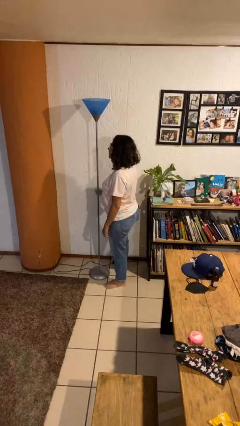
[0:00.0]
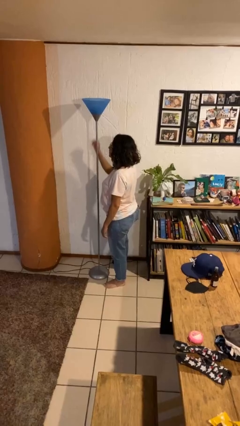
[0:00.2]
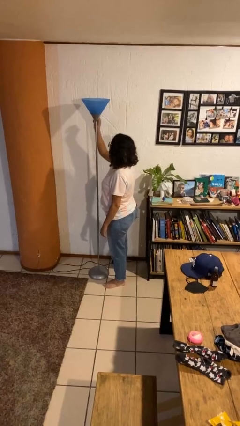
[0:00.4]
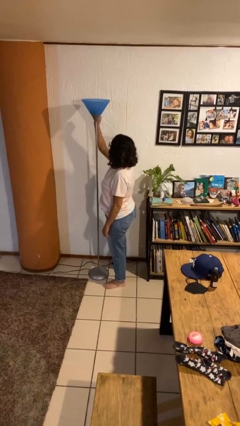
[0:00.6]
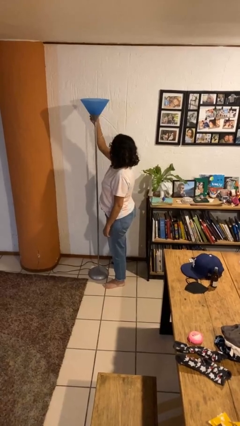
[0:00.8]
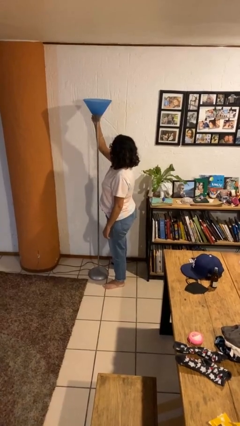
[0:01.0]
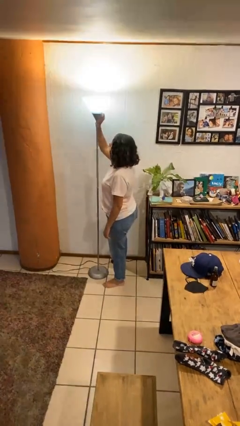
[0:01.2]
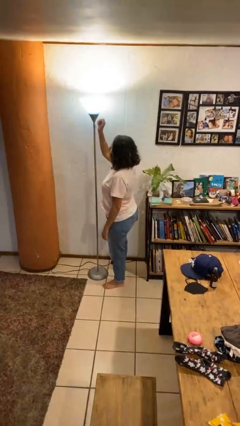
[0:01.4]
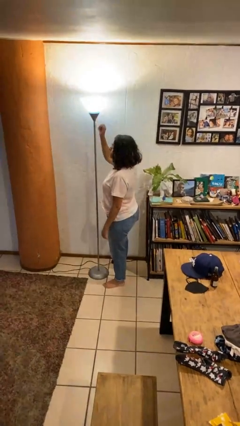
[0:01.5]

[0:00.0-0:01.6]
person turns on lamp

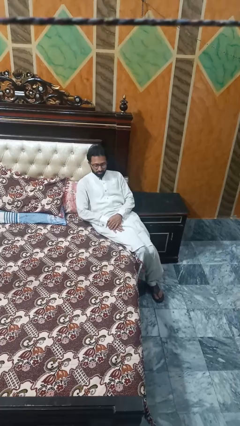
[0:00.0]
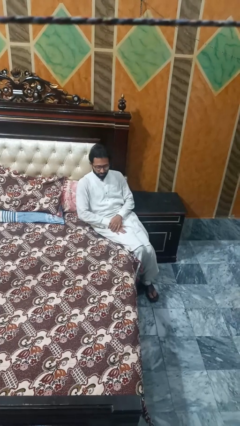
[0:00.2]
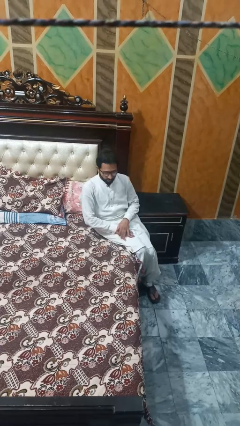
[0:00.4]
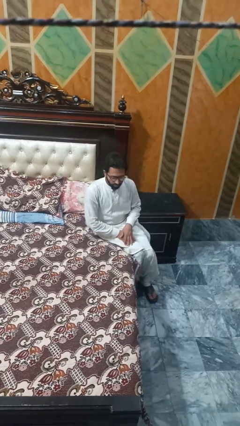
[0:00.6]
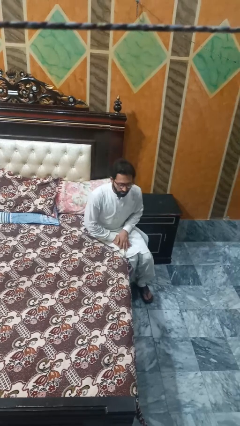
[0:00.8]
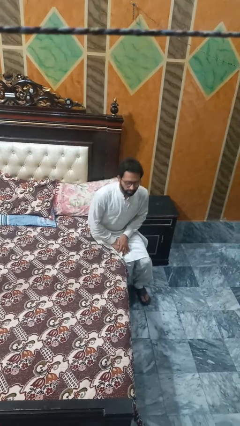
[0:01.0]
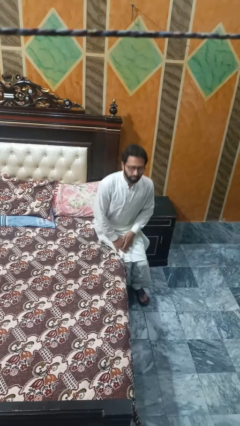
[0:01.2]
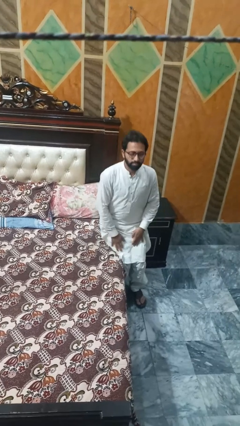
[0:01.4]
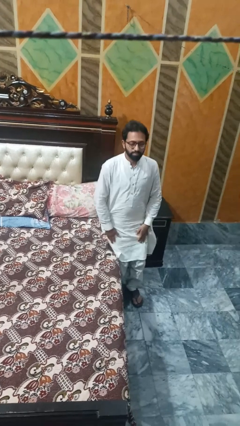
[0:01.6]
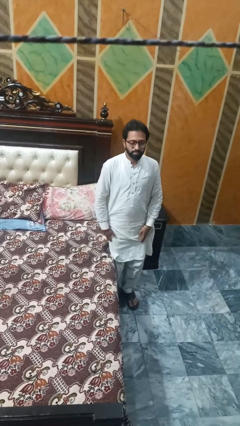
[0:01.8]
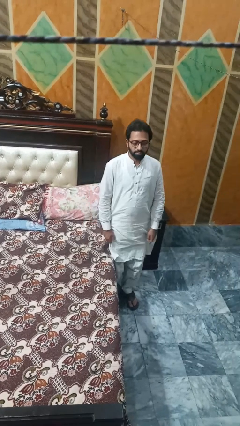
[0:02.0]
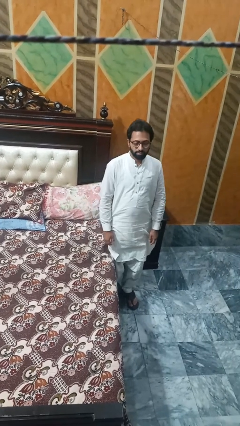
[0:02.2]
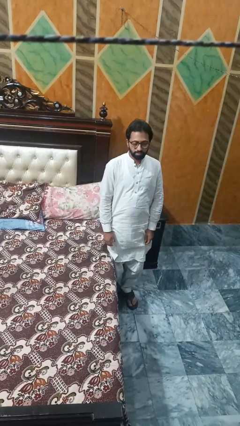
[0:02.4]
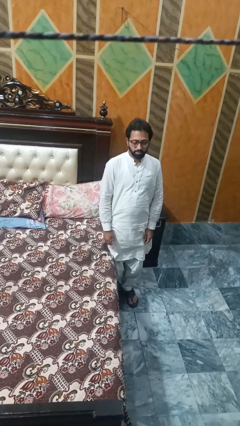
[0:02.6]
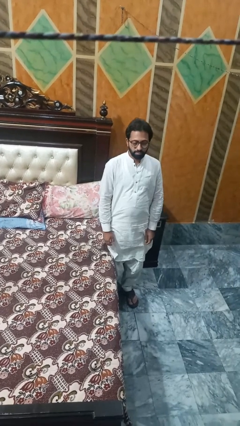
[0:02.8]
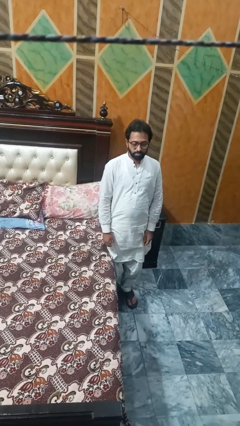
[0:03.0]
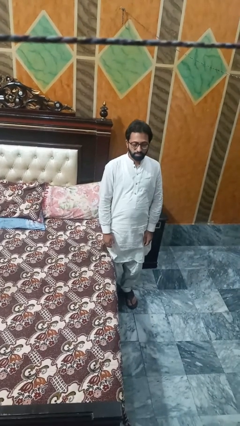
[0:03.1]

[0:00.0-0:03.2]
person stands up

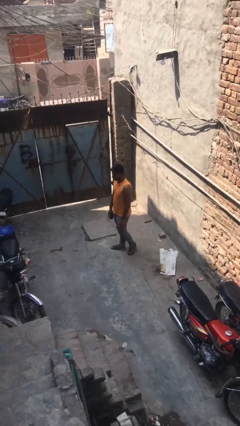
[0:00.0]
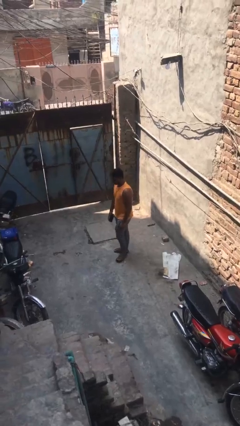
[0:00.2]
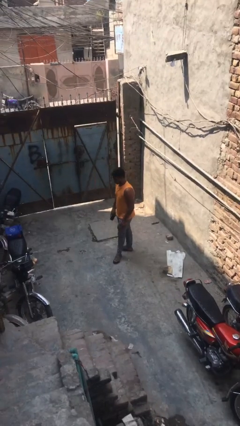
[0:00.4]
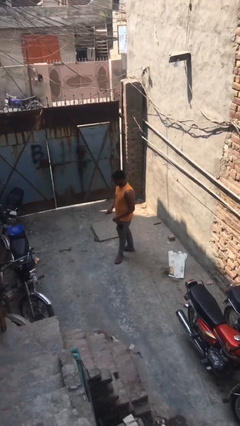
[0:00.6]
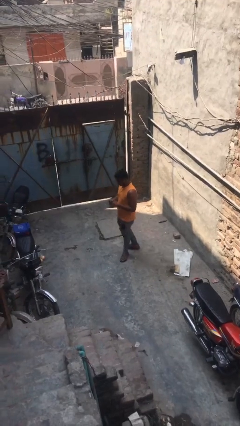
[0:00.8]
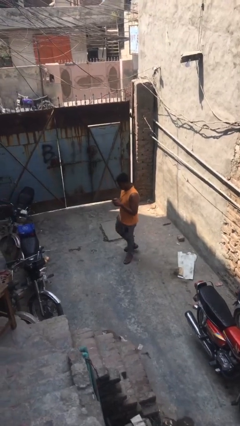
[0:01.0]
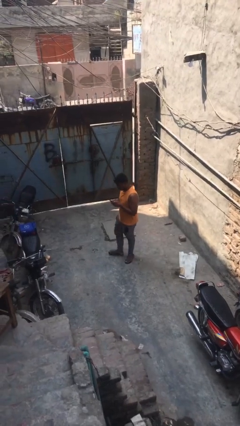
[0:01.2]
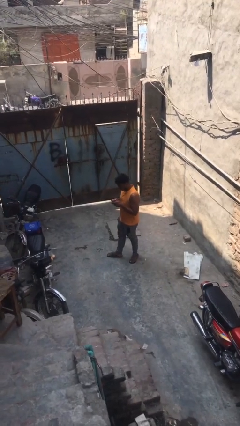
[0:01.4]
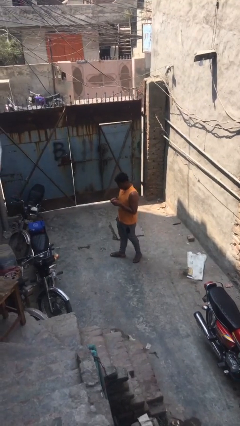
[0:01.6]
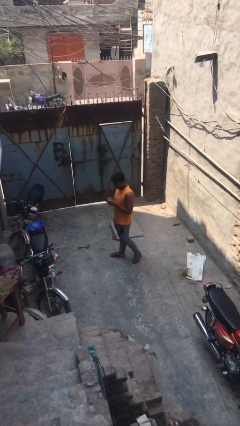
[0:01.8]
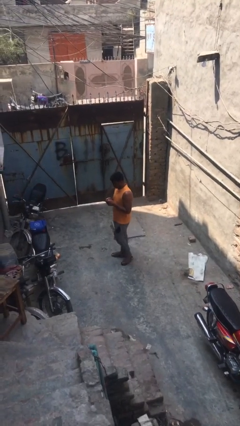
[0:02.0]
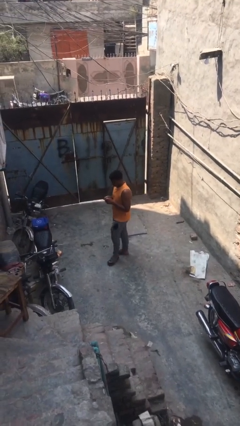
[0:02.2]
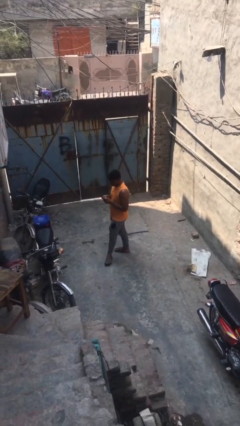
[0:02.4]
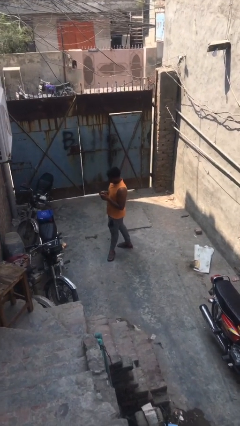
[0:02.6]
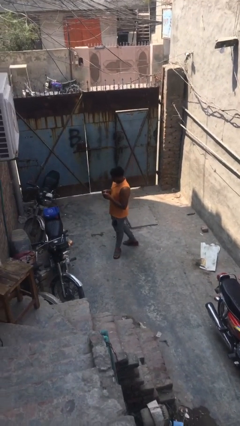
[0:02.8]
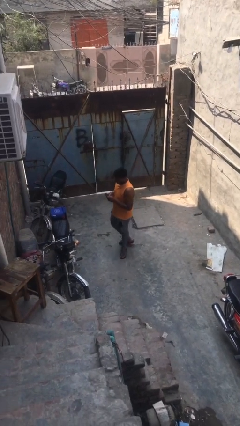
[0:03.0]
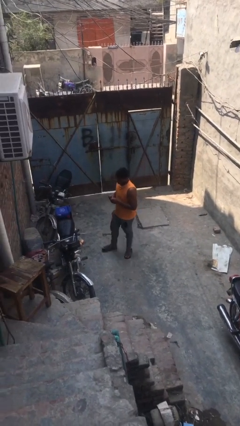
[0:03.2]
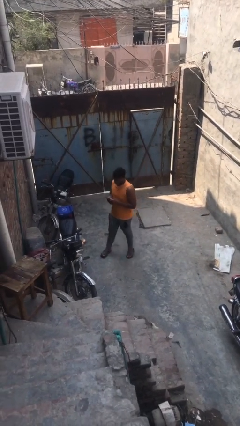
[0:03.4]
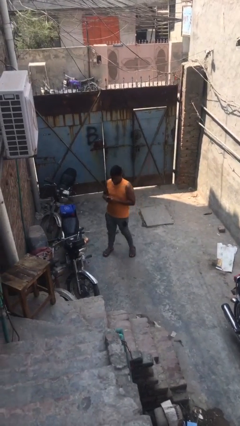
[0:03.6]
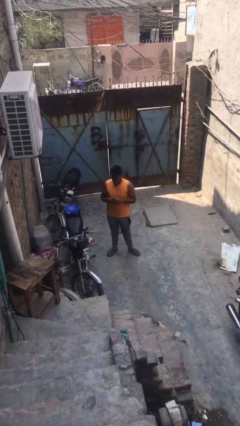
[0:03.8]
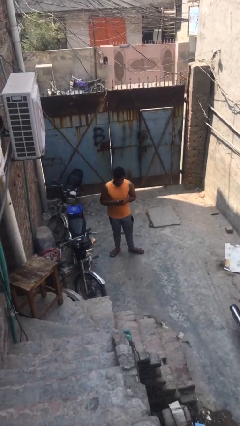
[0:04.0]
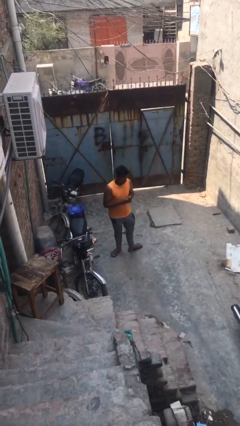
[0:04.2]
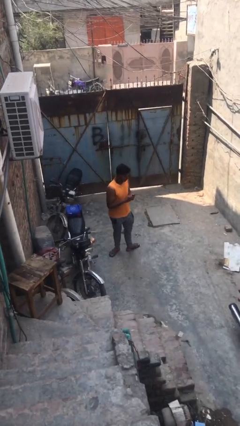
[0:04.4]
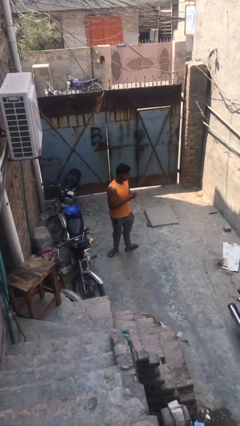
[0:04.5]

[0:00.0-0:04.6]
person texts on phone

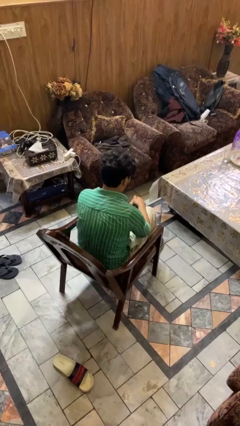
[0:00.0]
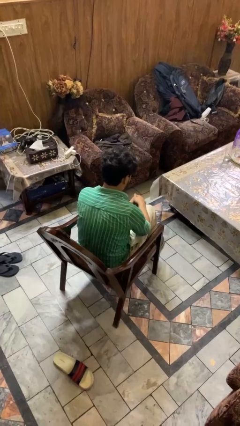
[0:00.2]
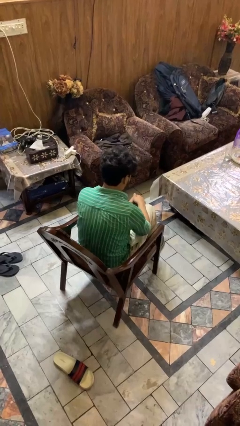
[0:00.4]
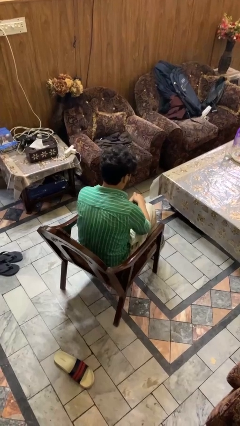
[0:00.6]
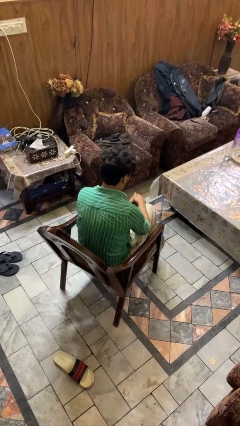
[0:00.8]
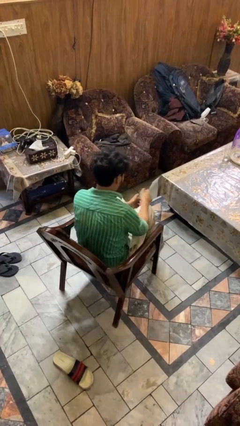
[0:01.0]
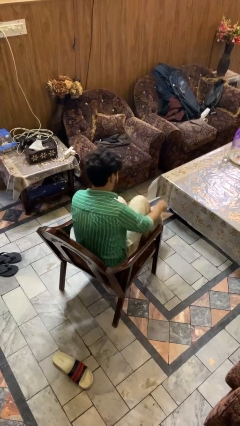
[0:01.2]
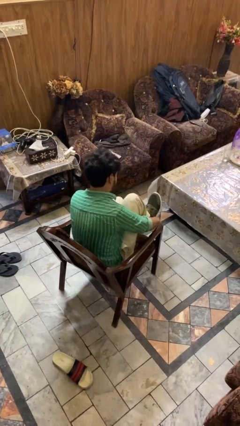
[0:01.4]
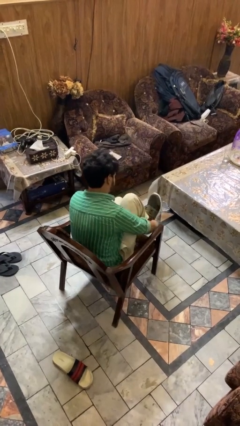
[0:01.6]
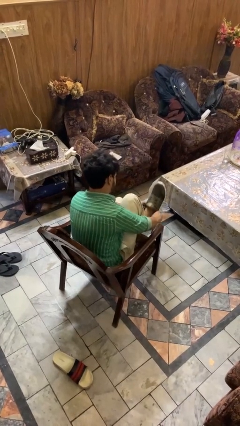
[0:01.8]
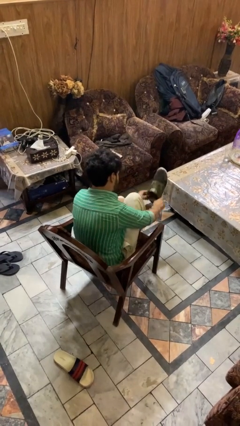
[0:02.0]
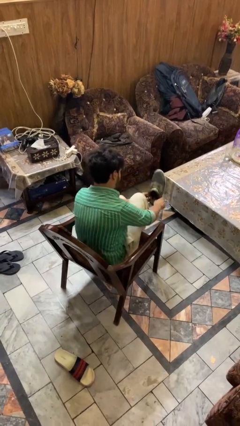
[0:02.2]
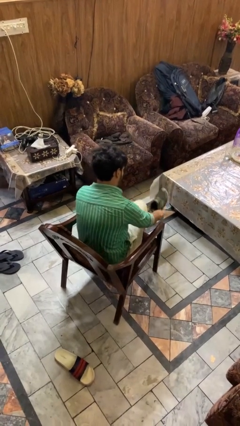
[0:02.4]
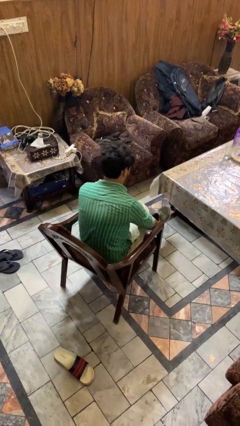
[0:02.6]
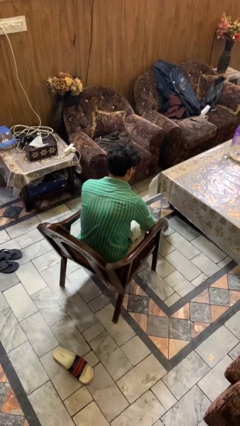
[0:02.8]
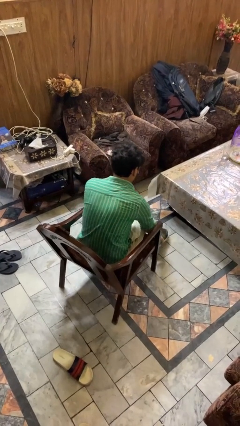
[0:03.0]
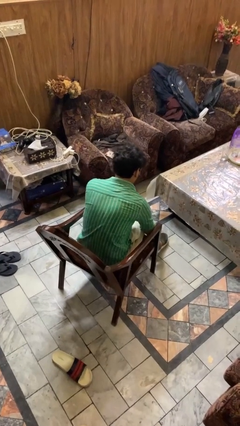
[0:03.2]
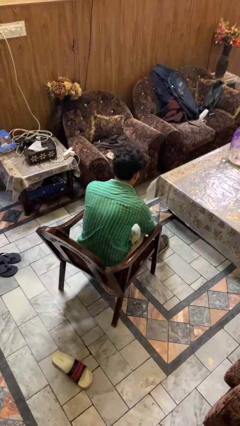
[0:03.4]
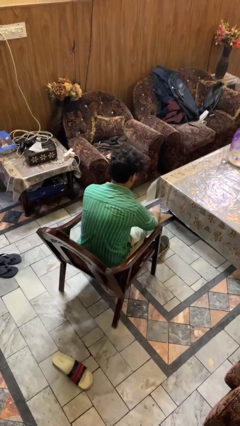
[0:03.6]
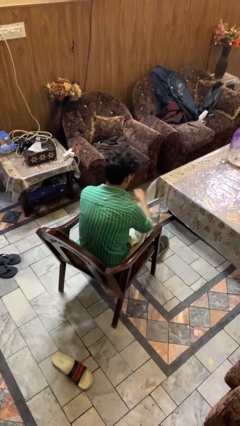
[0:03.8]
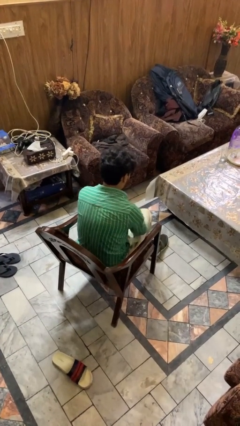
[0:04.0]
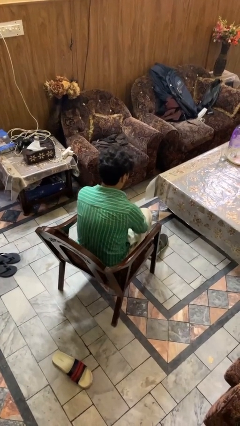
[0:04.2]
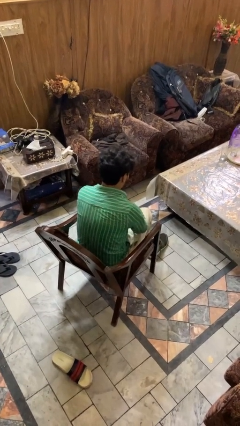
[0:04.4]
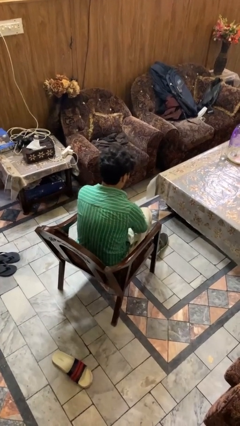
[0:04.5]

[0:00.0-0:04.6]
person takes off shoes

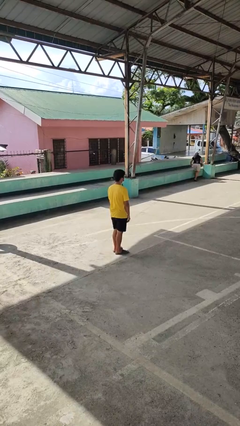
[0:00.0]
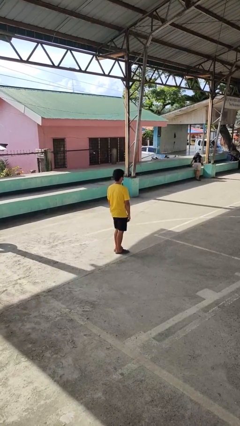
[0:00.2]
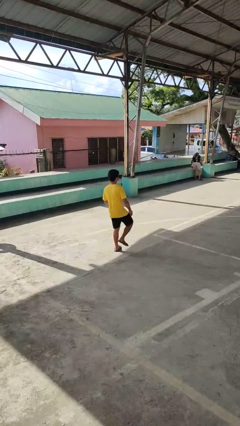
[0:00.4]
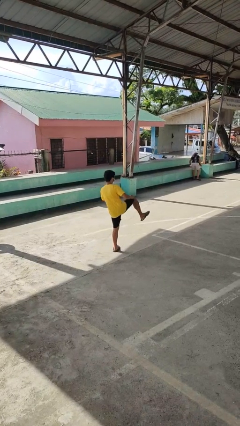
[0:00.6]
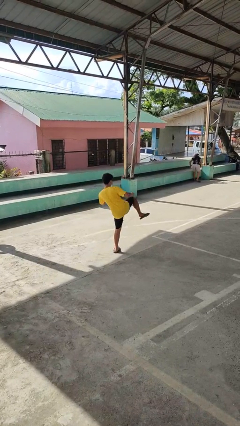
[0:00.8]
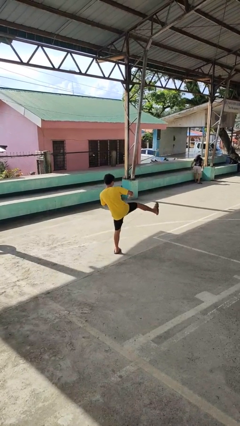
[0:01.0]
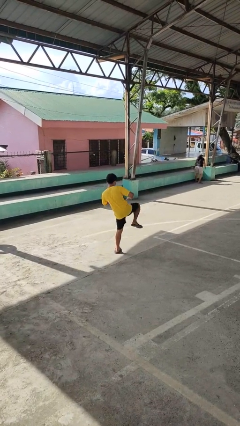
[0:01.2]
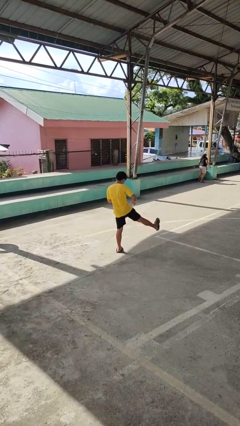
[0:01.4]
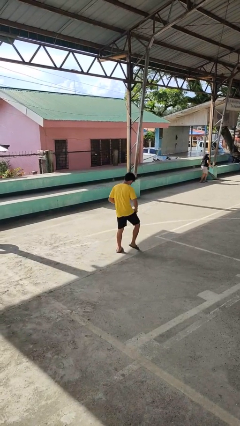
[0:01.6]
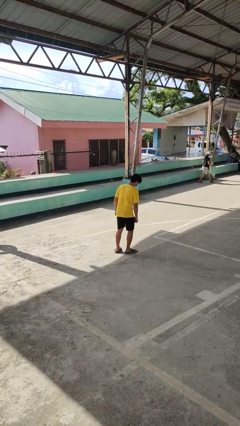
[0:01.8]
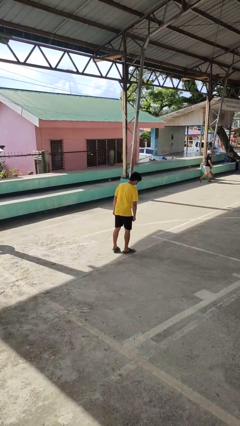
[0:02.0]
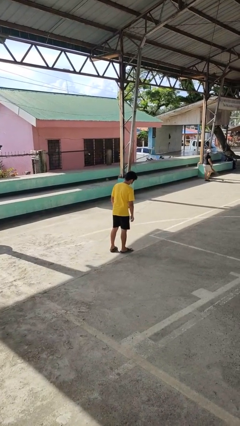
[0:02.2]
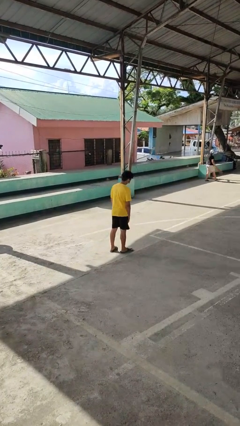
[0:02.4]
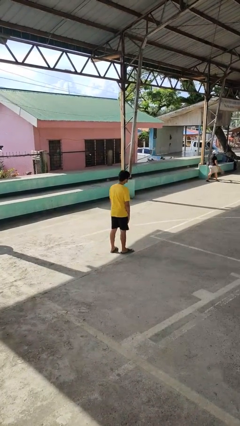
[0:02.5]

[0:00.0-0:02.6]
person karate kicks

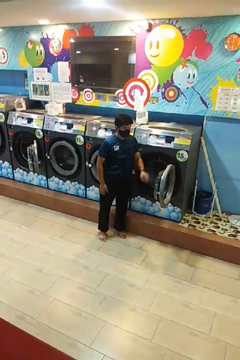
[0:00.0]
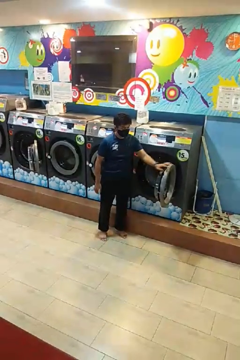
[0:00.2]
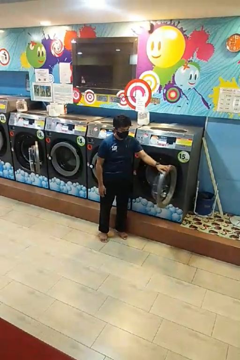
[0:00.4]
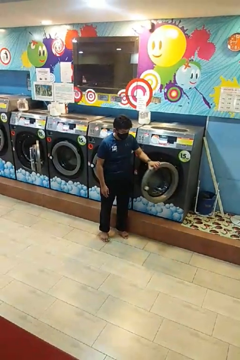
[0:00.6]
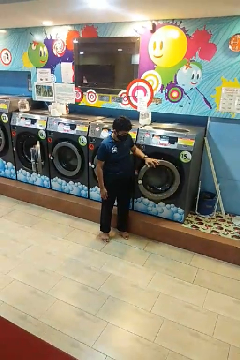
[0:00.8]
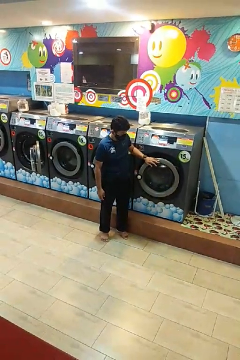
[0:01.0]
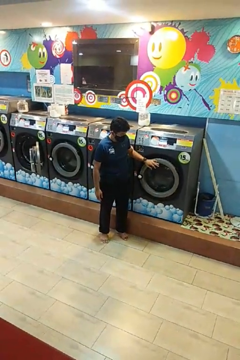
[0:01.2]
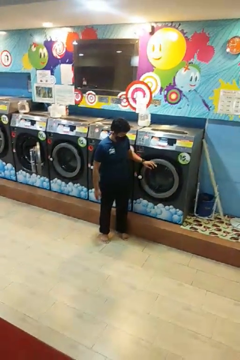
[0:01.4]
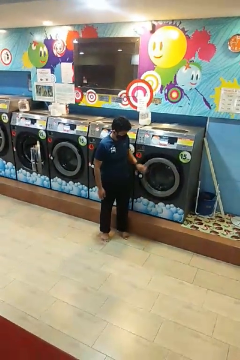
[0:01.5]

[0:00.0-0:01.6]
person closes clothes washer
